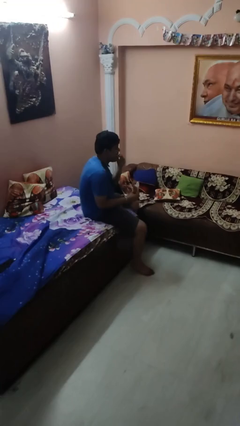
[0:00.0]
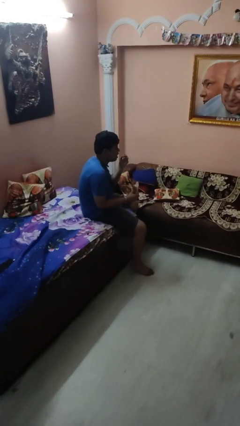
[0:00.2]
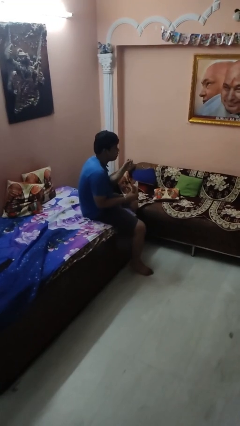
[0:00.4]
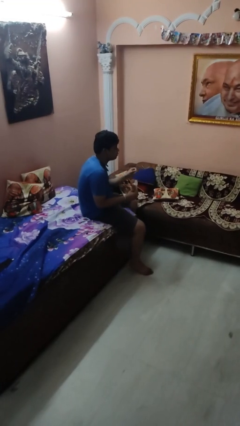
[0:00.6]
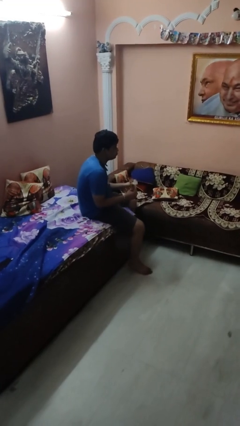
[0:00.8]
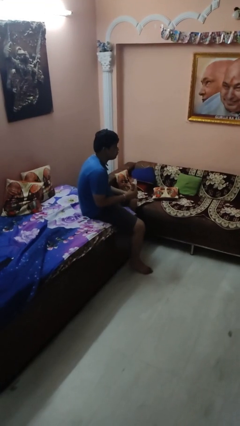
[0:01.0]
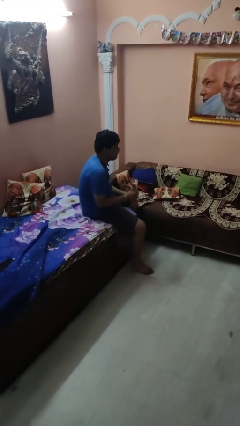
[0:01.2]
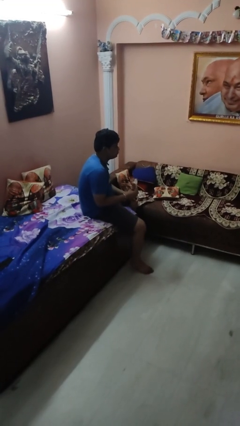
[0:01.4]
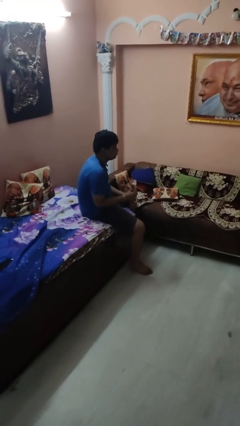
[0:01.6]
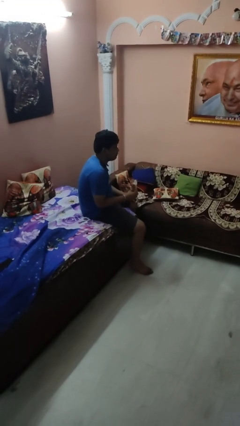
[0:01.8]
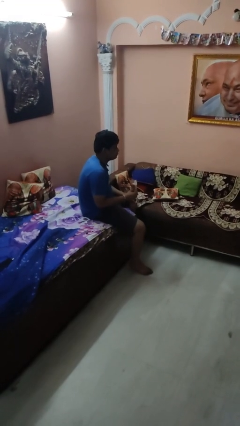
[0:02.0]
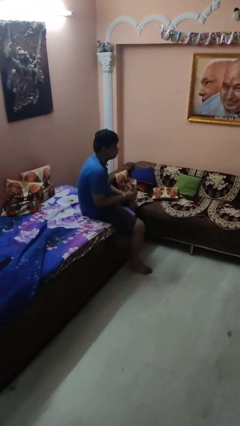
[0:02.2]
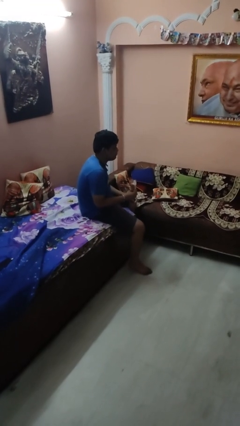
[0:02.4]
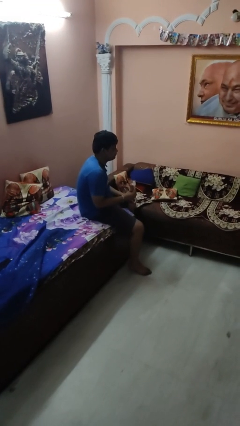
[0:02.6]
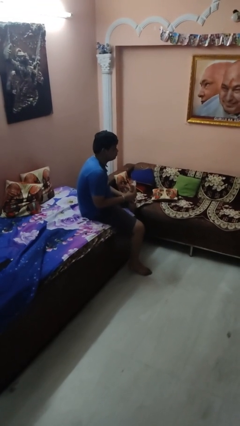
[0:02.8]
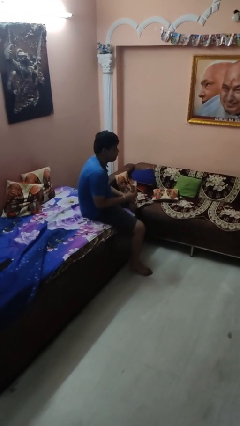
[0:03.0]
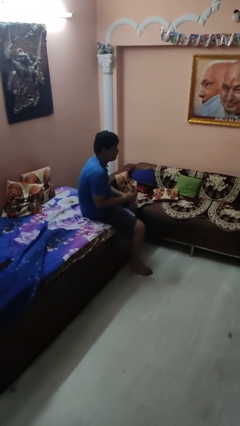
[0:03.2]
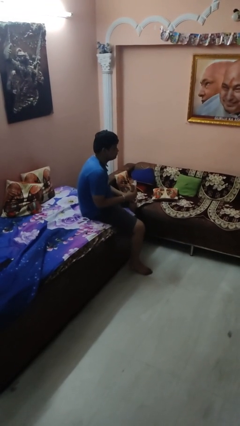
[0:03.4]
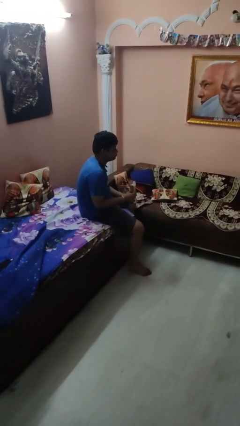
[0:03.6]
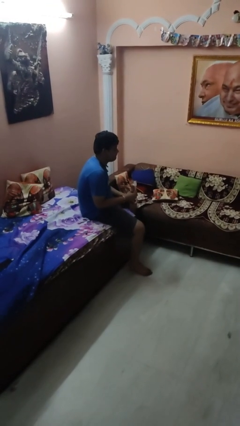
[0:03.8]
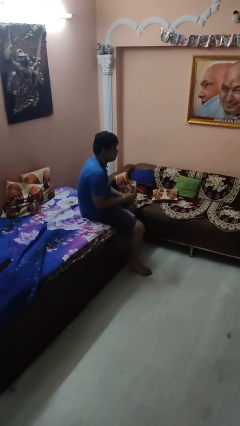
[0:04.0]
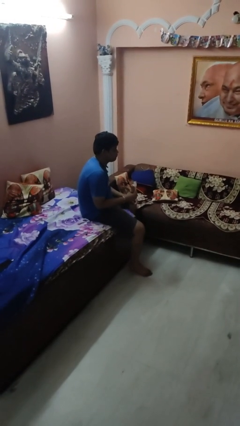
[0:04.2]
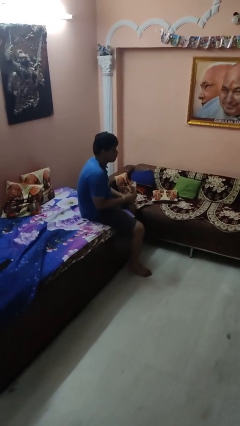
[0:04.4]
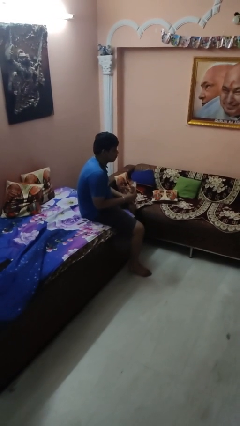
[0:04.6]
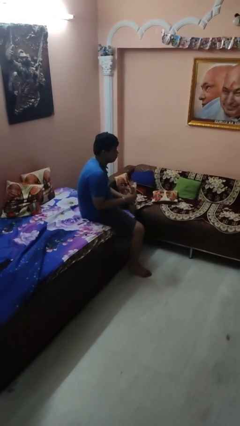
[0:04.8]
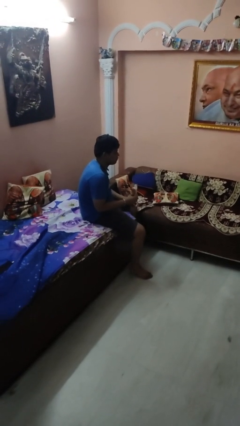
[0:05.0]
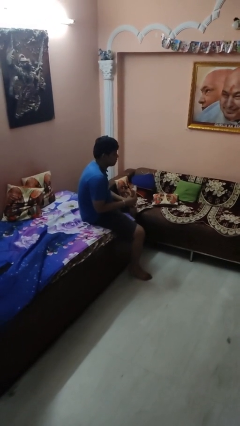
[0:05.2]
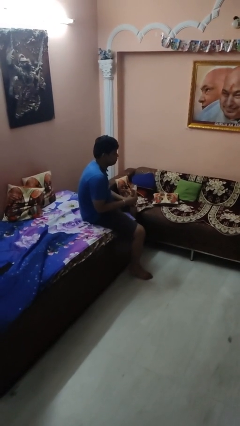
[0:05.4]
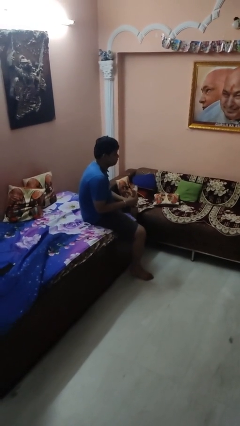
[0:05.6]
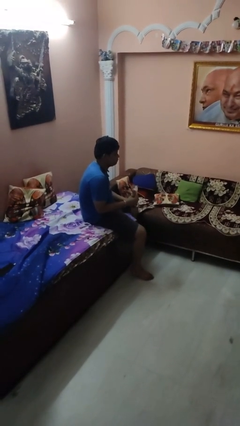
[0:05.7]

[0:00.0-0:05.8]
person eats snack from bag

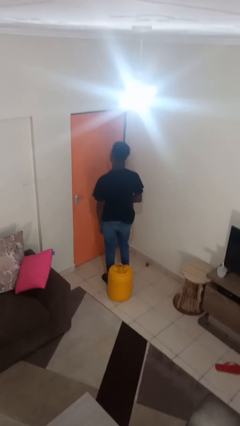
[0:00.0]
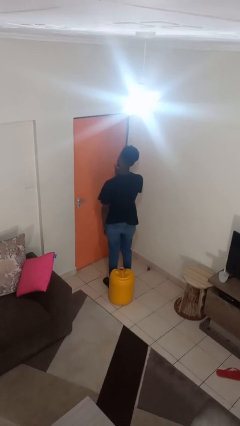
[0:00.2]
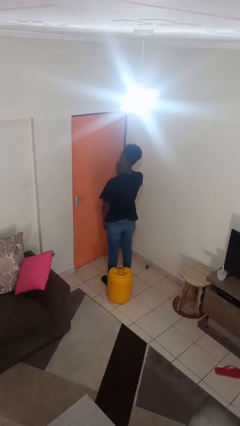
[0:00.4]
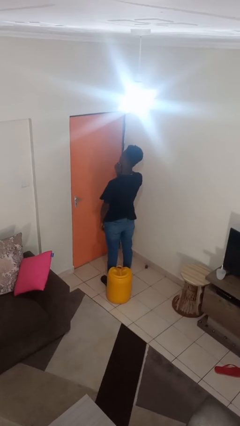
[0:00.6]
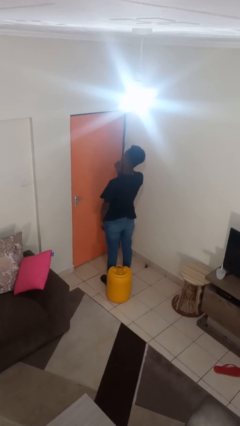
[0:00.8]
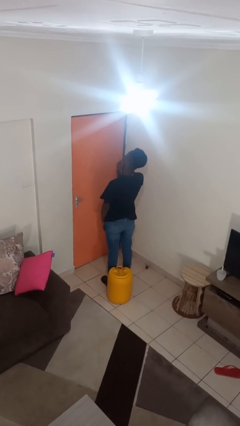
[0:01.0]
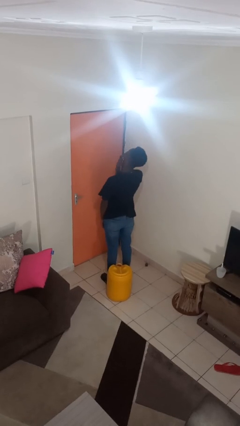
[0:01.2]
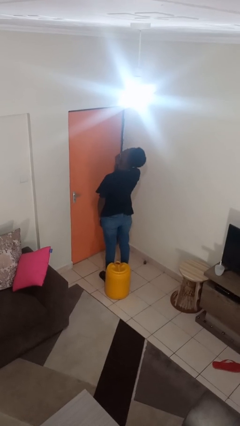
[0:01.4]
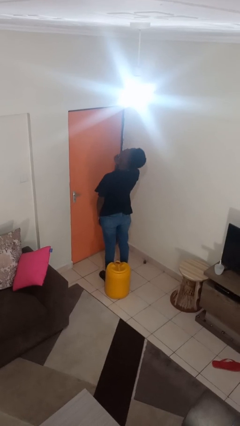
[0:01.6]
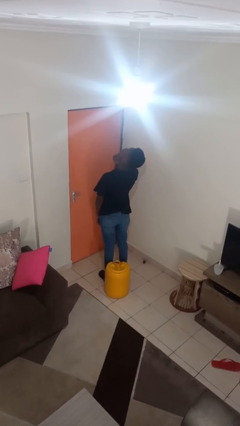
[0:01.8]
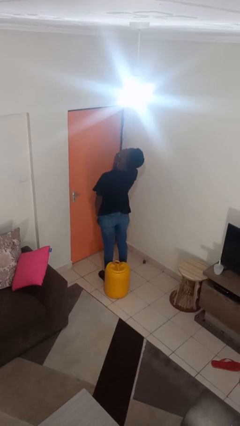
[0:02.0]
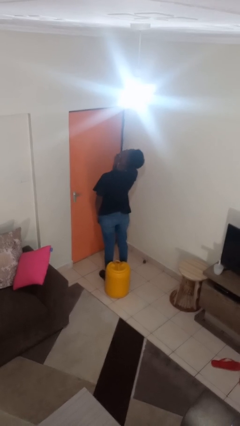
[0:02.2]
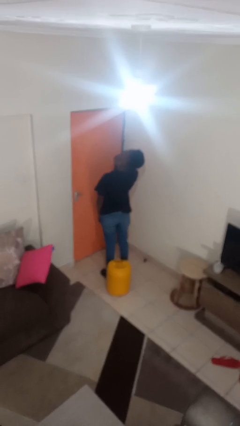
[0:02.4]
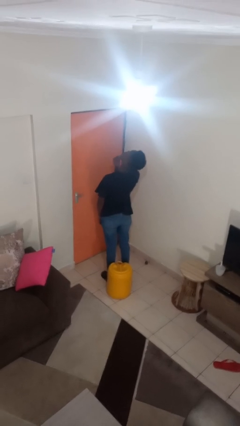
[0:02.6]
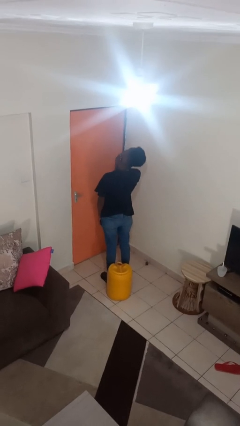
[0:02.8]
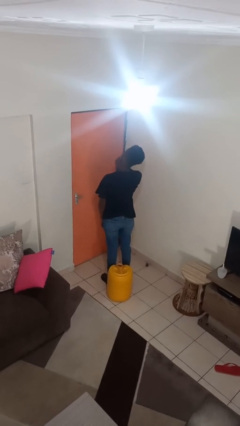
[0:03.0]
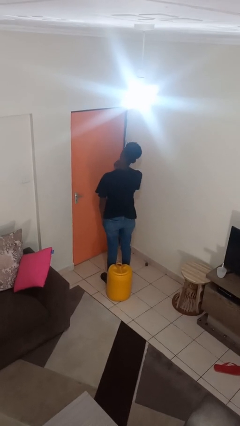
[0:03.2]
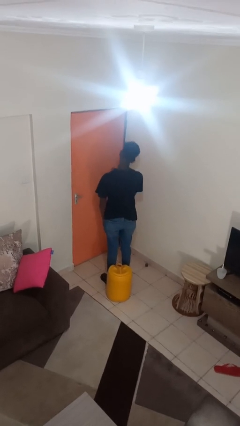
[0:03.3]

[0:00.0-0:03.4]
person strokes chin

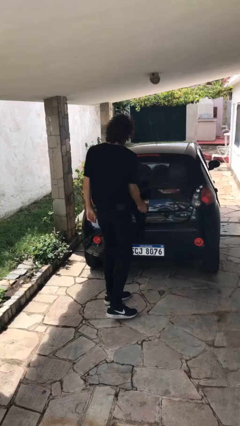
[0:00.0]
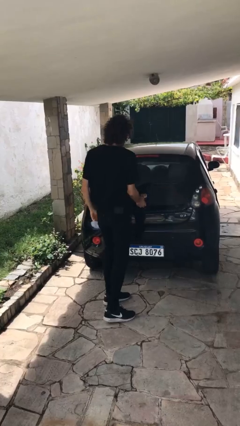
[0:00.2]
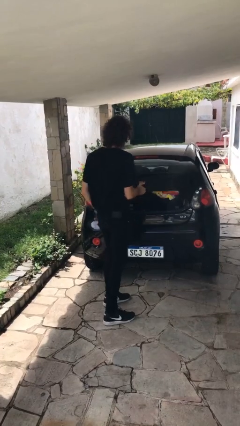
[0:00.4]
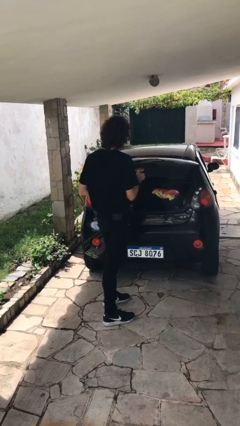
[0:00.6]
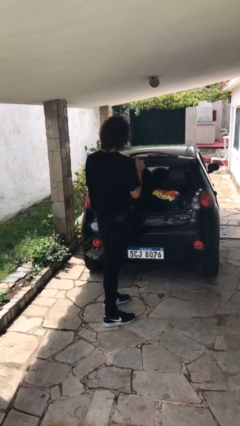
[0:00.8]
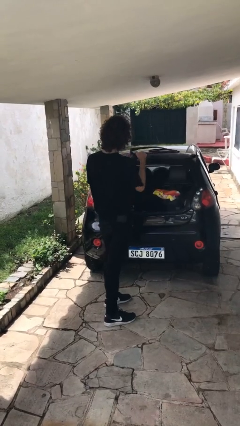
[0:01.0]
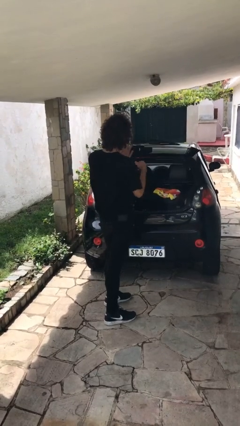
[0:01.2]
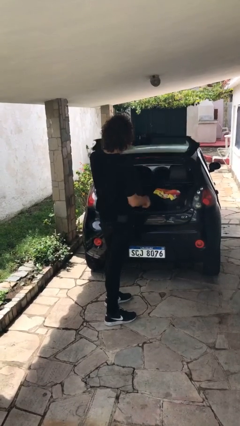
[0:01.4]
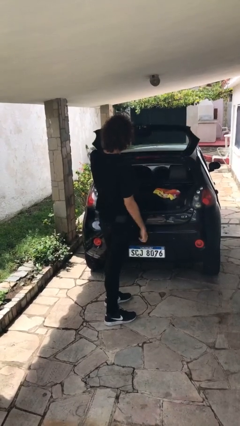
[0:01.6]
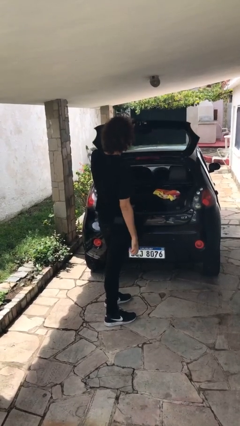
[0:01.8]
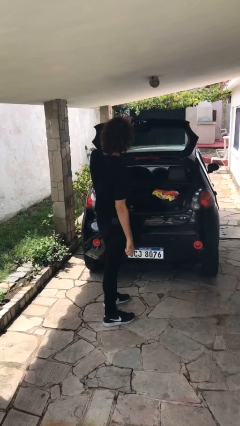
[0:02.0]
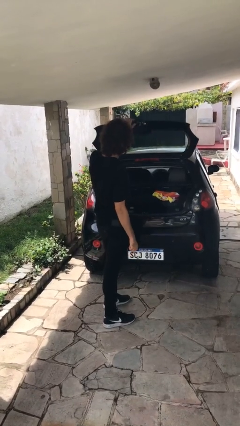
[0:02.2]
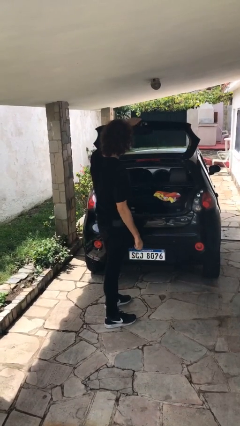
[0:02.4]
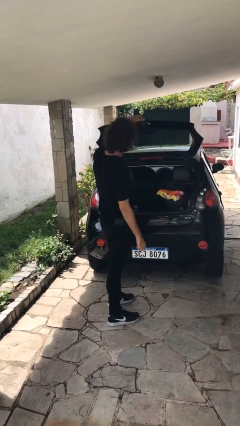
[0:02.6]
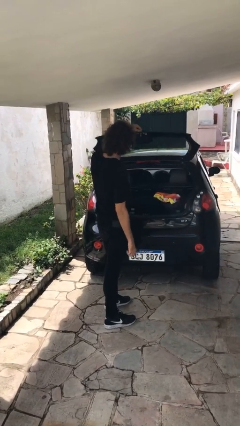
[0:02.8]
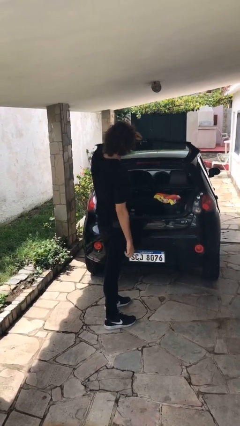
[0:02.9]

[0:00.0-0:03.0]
person opens car trunk

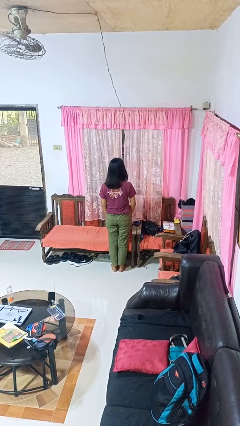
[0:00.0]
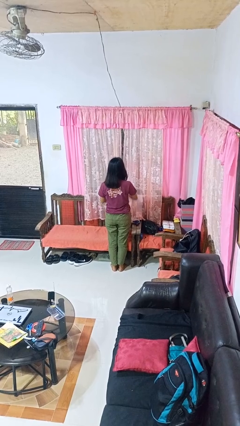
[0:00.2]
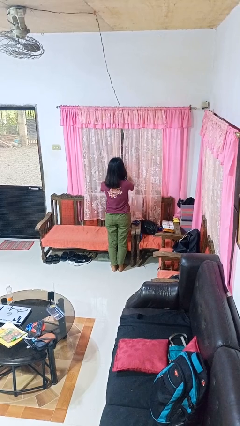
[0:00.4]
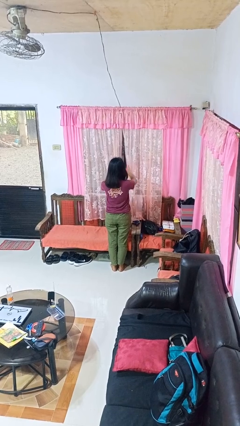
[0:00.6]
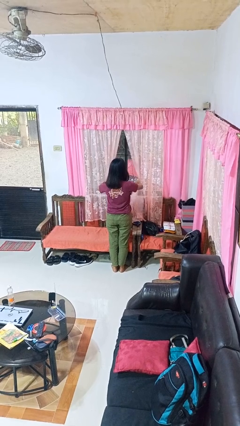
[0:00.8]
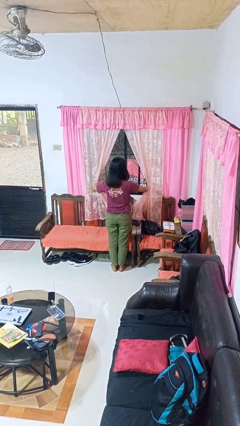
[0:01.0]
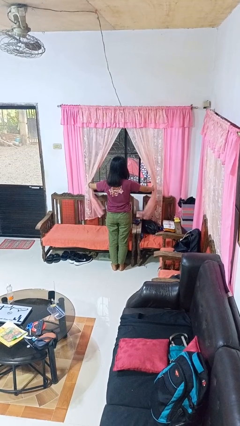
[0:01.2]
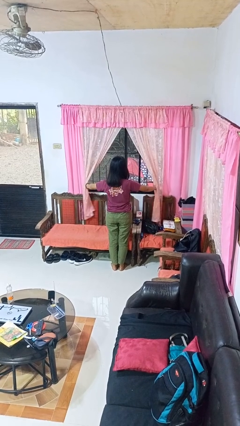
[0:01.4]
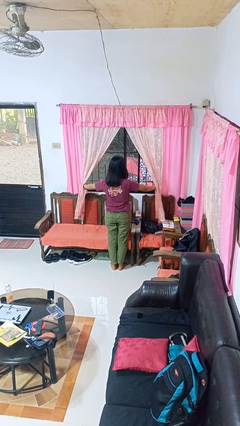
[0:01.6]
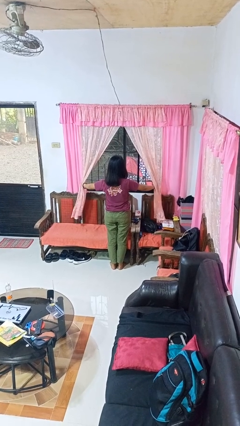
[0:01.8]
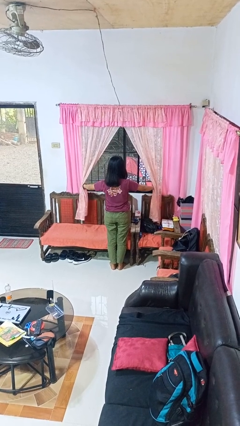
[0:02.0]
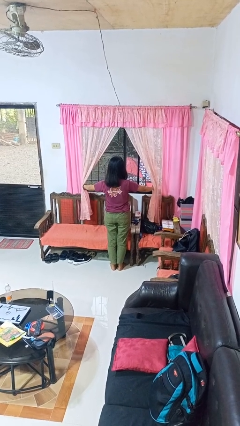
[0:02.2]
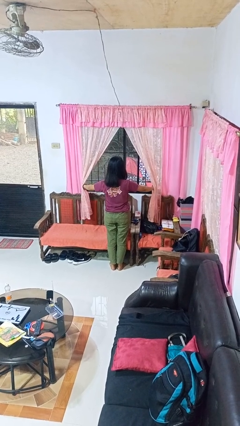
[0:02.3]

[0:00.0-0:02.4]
person opens curtains

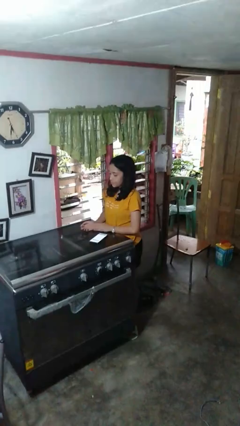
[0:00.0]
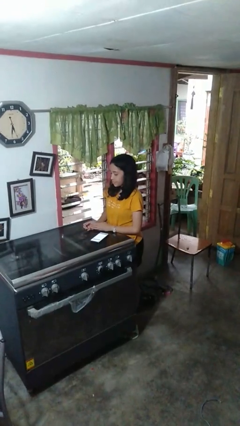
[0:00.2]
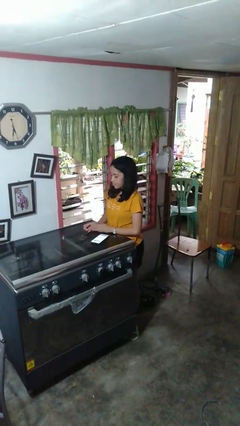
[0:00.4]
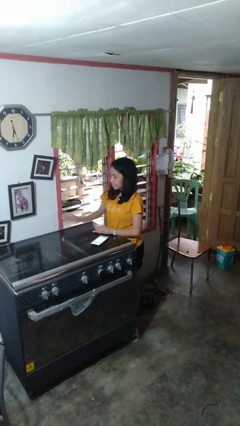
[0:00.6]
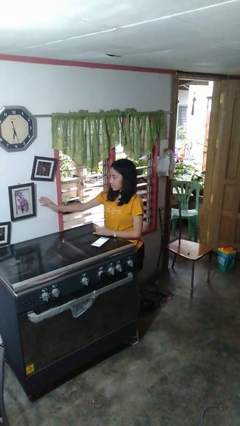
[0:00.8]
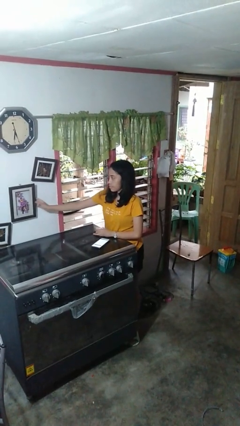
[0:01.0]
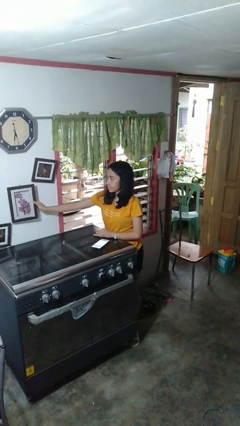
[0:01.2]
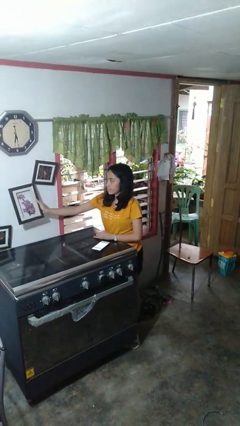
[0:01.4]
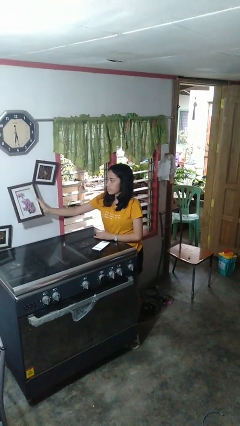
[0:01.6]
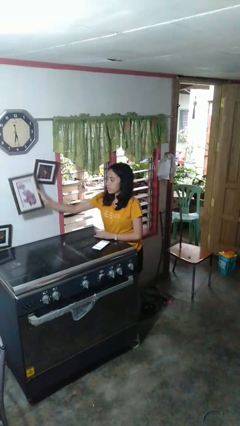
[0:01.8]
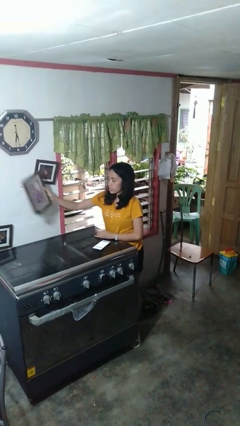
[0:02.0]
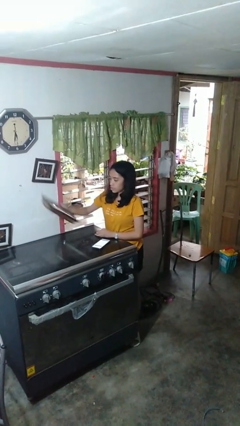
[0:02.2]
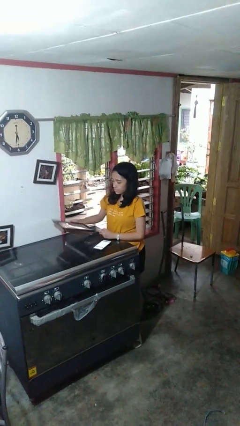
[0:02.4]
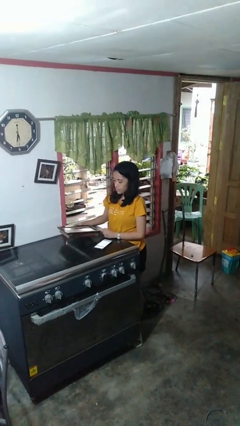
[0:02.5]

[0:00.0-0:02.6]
person takes down picture frame

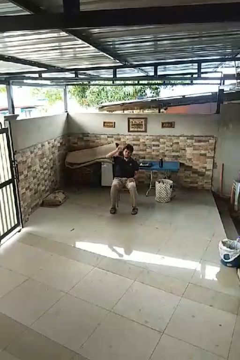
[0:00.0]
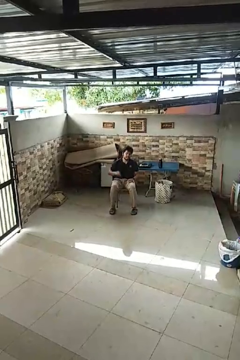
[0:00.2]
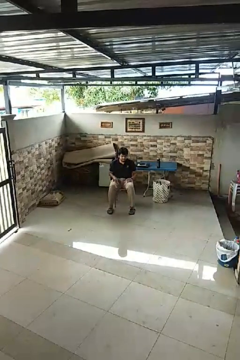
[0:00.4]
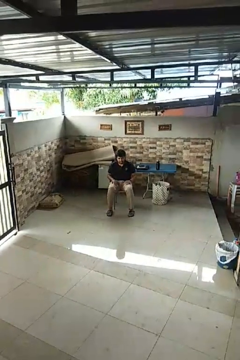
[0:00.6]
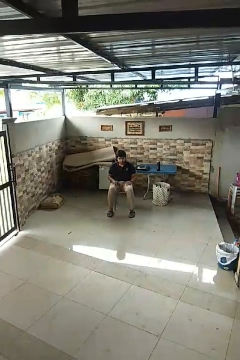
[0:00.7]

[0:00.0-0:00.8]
person gestures lower hand
